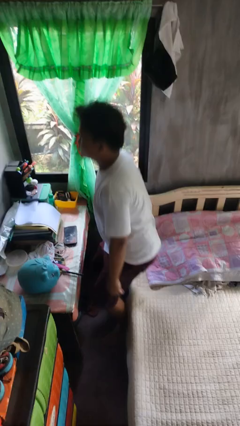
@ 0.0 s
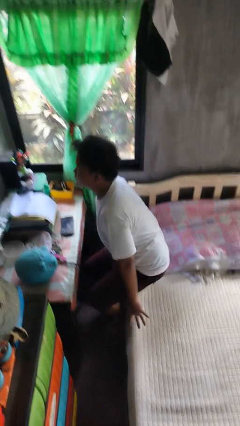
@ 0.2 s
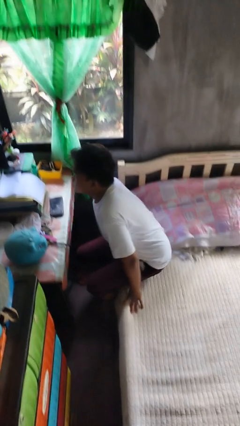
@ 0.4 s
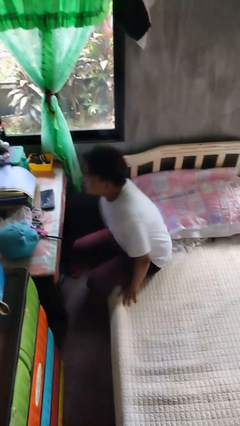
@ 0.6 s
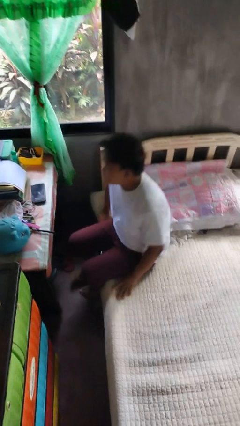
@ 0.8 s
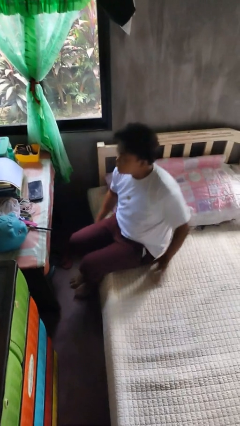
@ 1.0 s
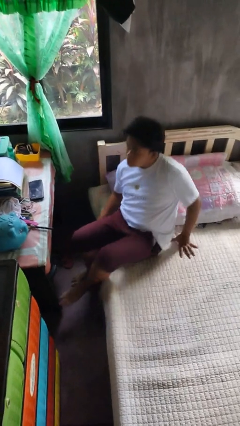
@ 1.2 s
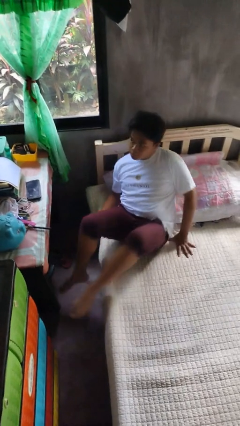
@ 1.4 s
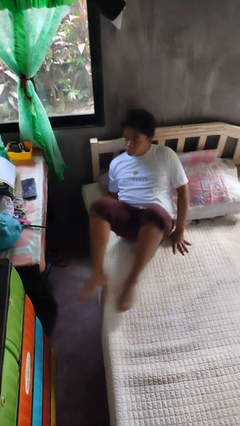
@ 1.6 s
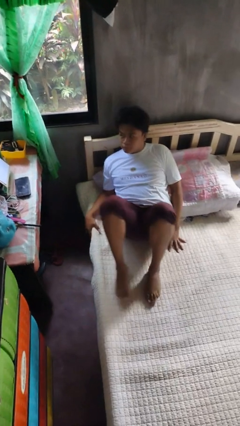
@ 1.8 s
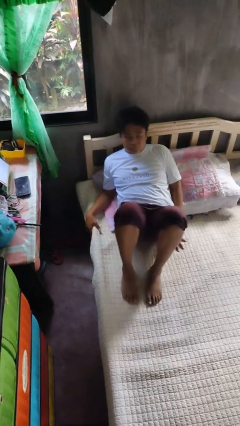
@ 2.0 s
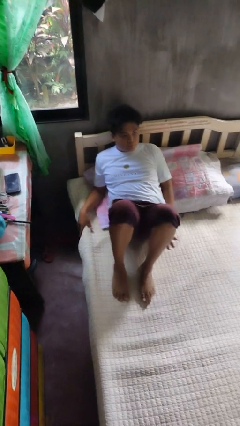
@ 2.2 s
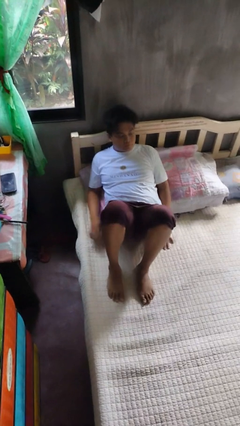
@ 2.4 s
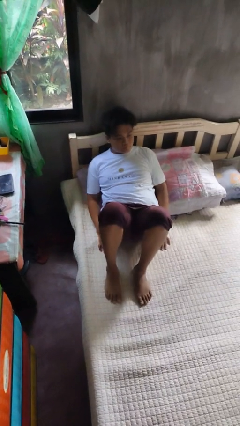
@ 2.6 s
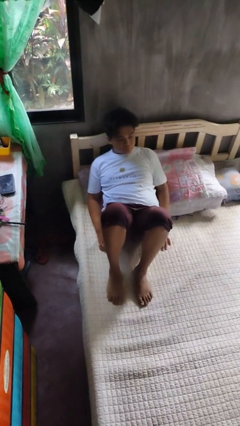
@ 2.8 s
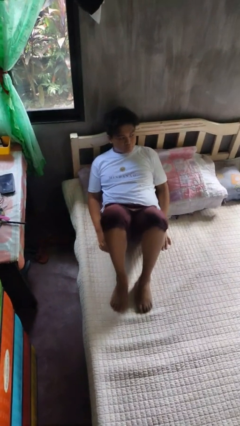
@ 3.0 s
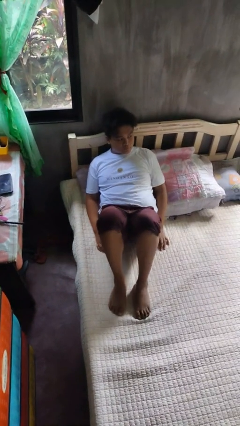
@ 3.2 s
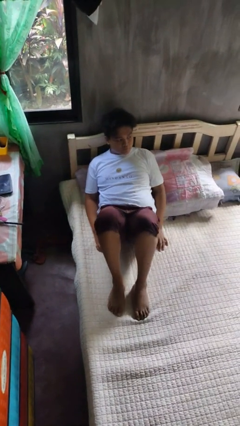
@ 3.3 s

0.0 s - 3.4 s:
person lies down on bed

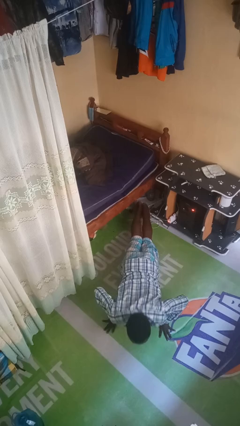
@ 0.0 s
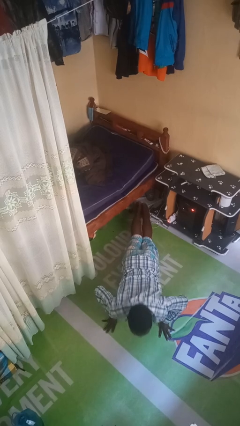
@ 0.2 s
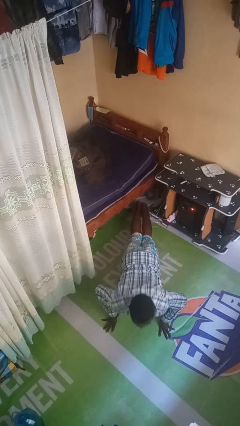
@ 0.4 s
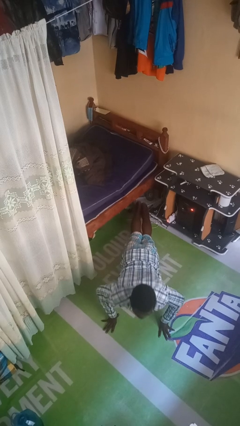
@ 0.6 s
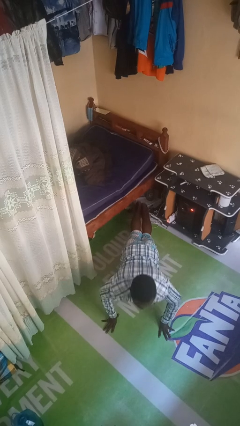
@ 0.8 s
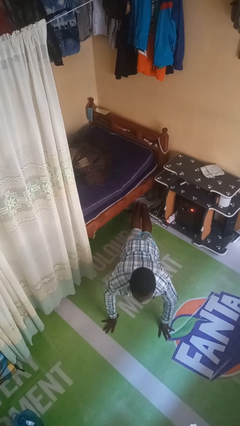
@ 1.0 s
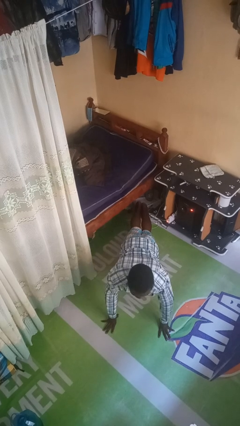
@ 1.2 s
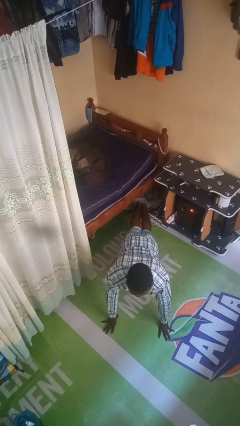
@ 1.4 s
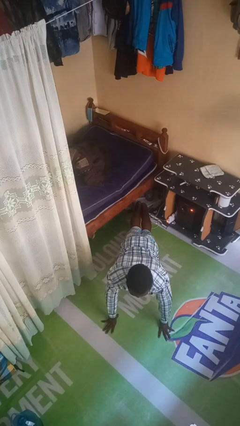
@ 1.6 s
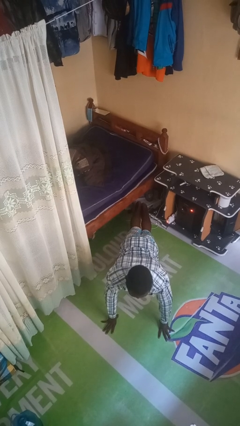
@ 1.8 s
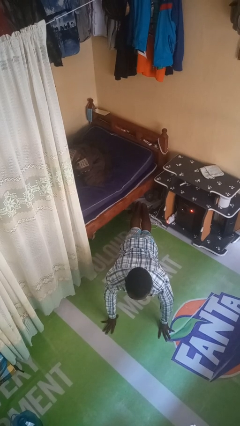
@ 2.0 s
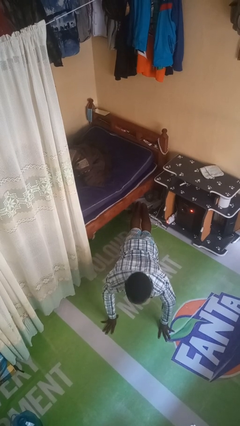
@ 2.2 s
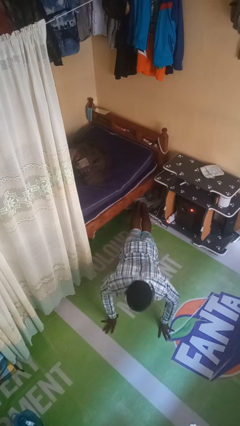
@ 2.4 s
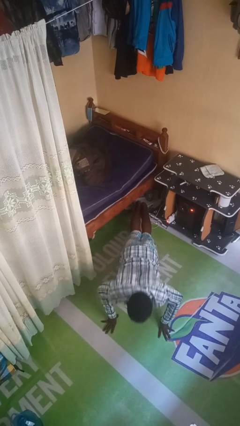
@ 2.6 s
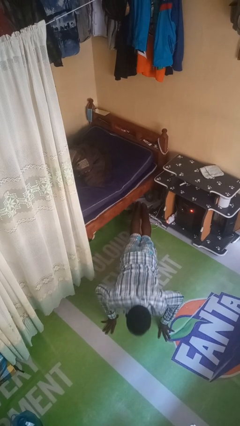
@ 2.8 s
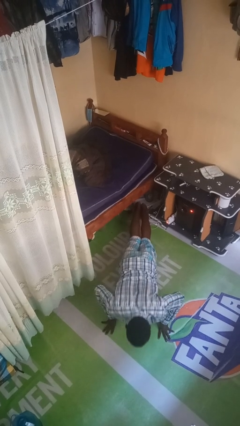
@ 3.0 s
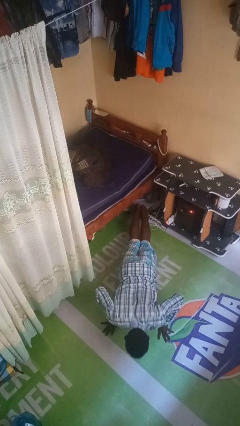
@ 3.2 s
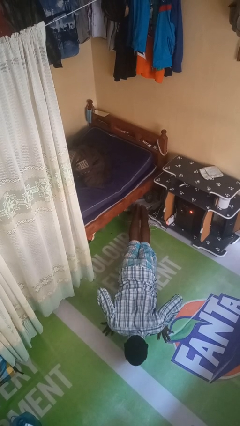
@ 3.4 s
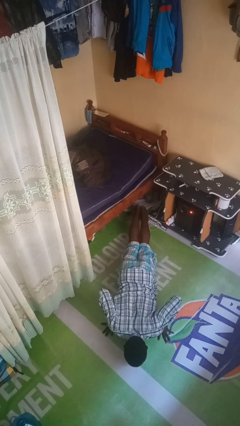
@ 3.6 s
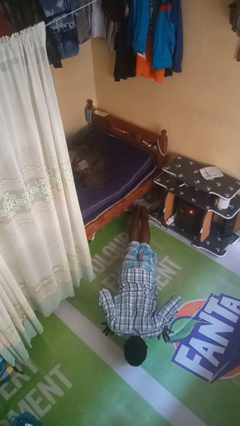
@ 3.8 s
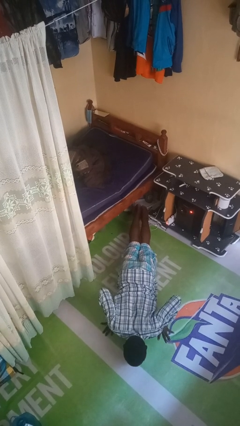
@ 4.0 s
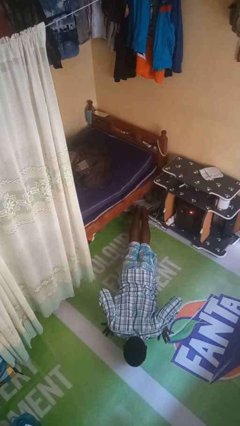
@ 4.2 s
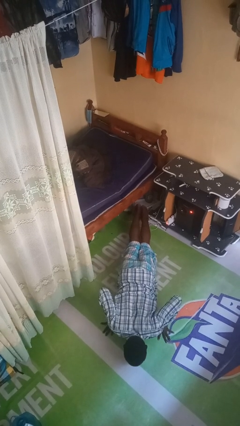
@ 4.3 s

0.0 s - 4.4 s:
person exercises with pushup

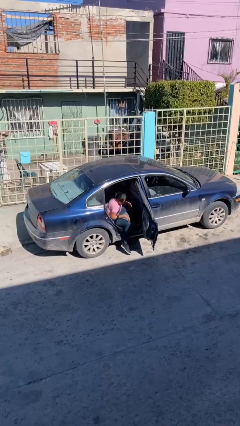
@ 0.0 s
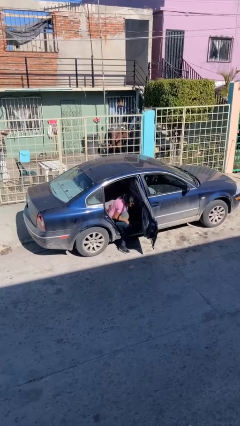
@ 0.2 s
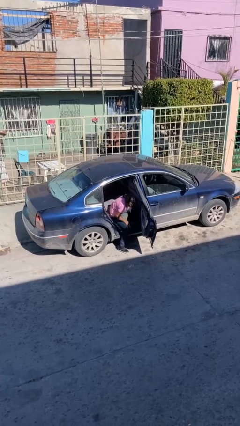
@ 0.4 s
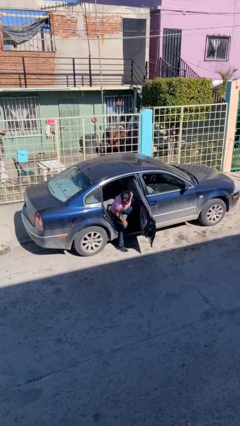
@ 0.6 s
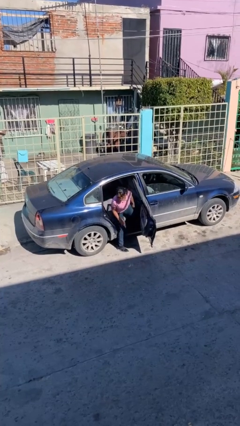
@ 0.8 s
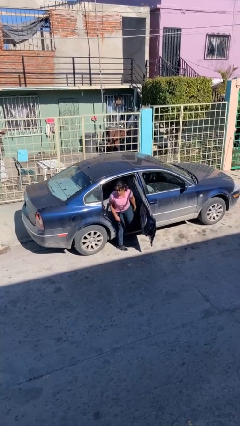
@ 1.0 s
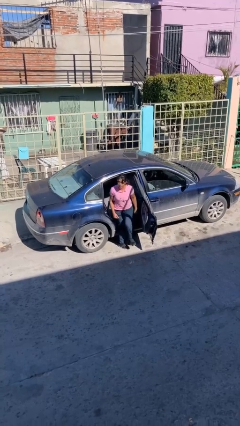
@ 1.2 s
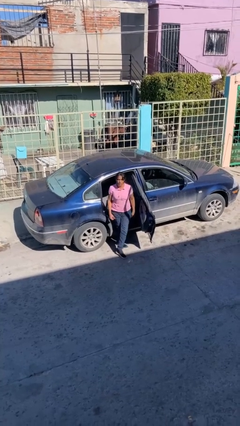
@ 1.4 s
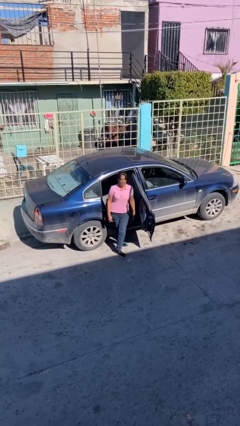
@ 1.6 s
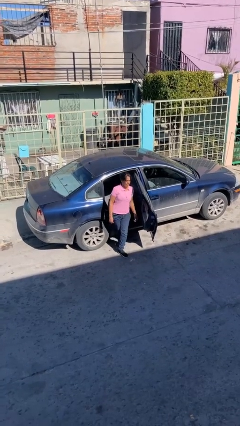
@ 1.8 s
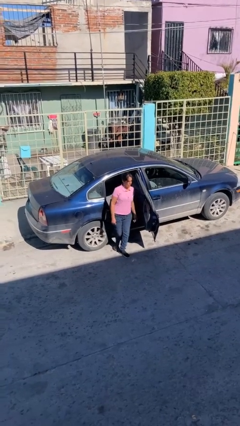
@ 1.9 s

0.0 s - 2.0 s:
person exits car

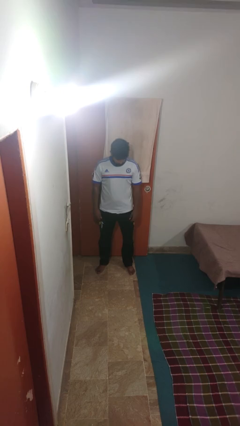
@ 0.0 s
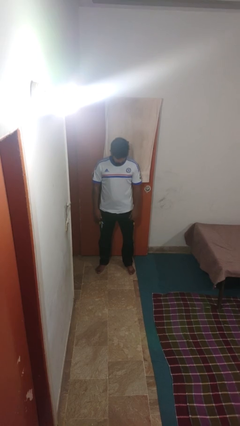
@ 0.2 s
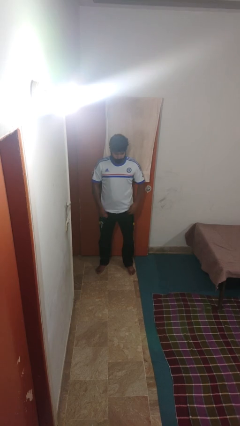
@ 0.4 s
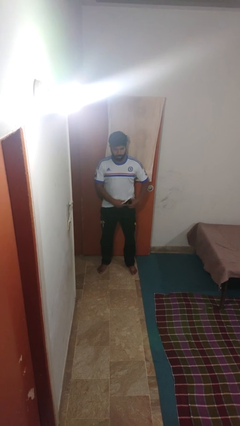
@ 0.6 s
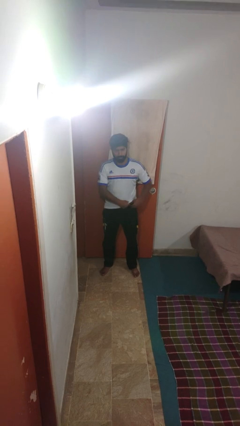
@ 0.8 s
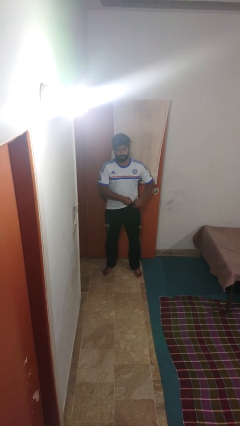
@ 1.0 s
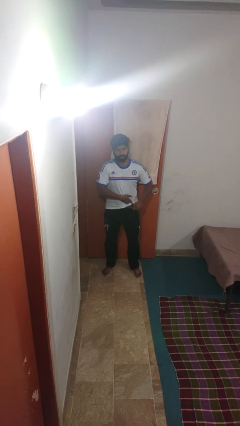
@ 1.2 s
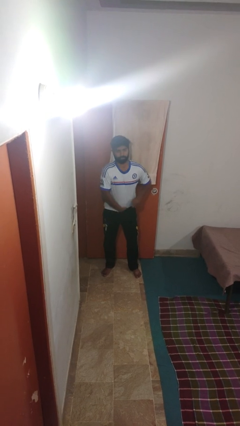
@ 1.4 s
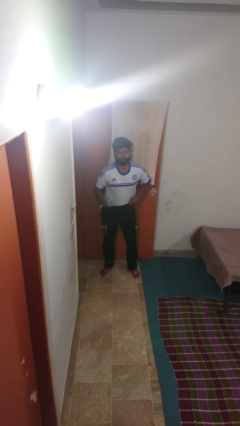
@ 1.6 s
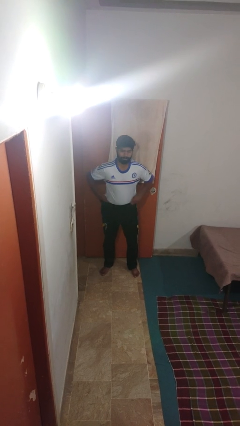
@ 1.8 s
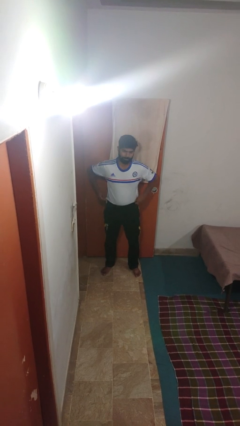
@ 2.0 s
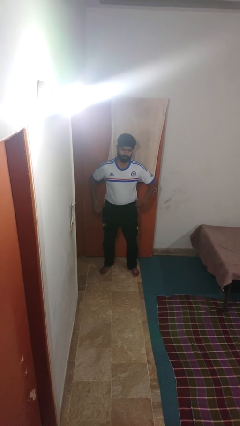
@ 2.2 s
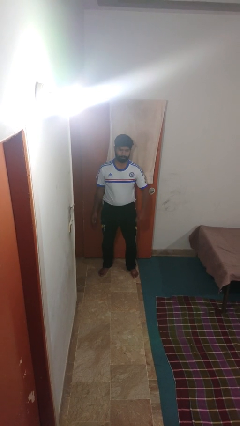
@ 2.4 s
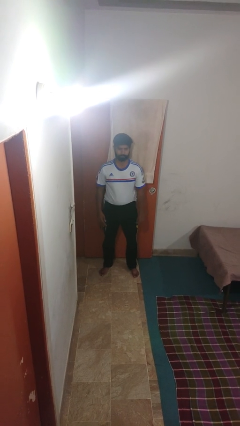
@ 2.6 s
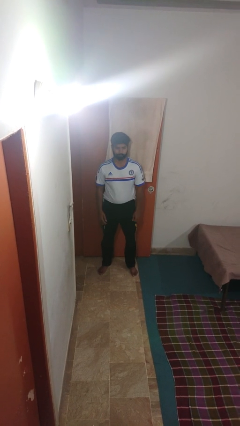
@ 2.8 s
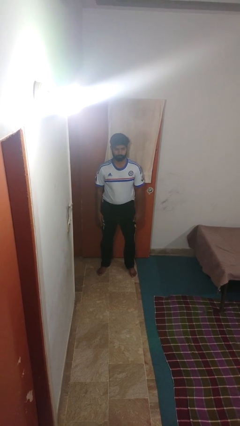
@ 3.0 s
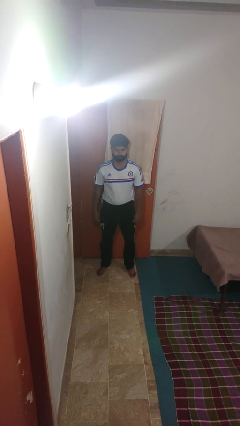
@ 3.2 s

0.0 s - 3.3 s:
person tucks in shirt

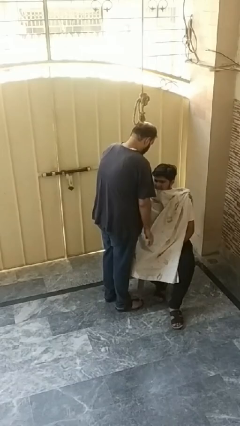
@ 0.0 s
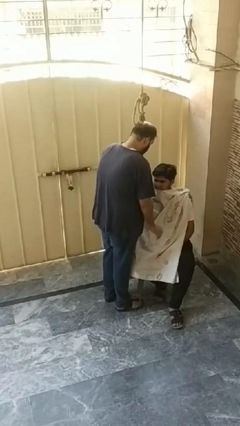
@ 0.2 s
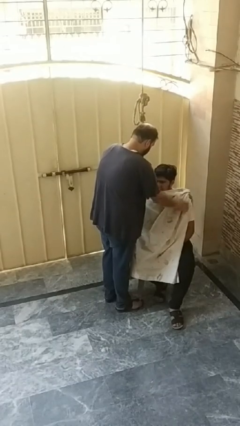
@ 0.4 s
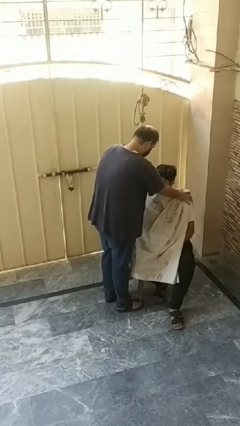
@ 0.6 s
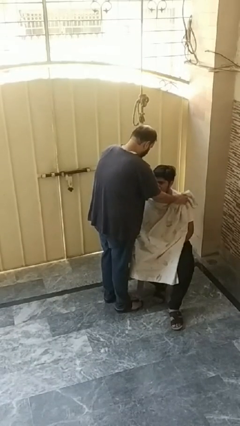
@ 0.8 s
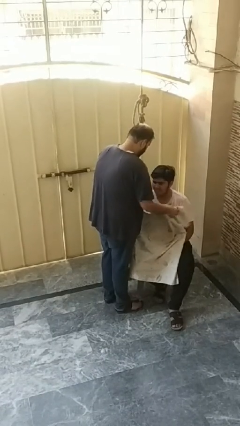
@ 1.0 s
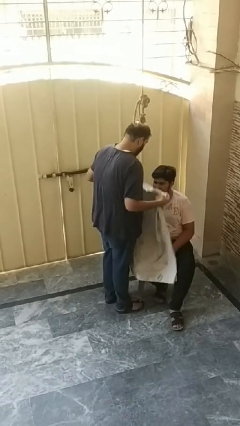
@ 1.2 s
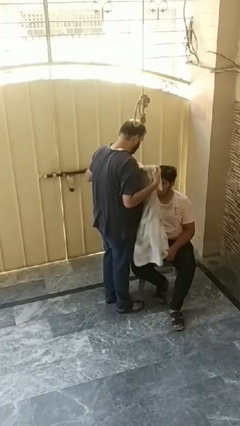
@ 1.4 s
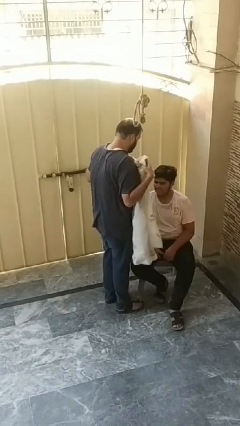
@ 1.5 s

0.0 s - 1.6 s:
person uncovers friend with blanket

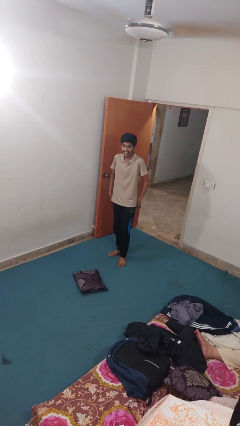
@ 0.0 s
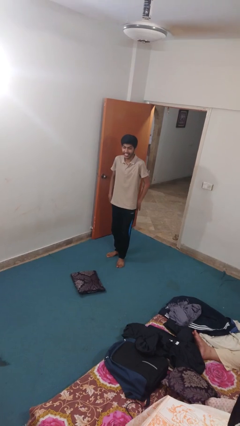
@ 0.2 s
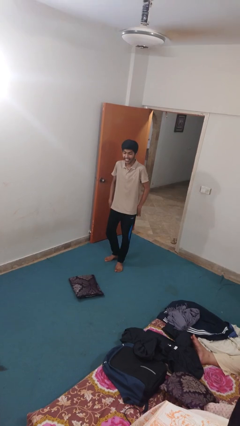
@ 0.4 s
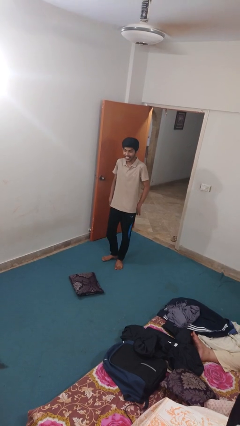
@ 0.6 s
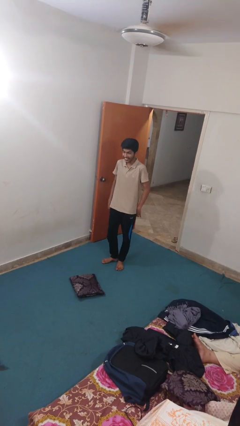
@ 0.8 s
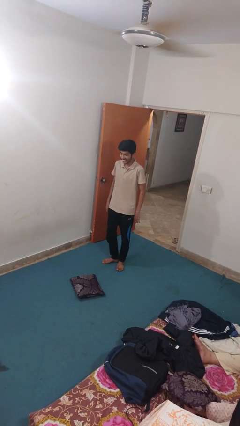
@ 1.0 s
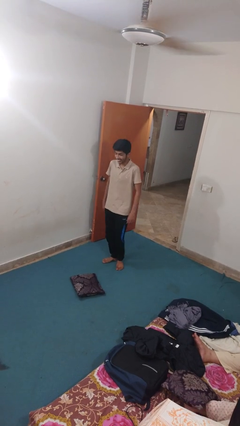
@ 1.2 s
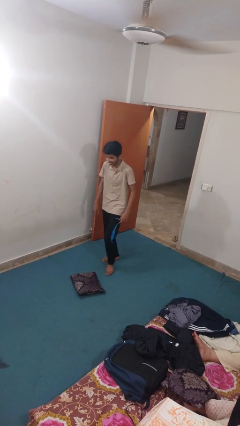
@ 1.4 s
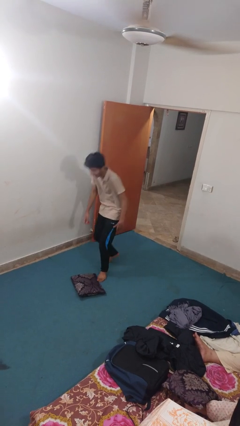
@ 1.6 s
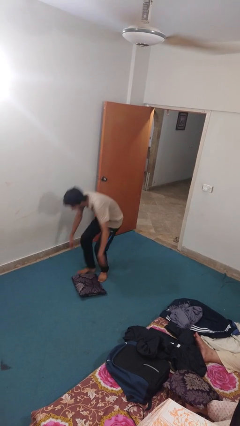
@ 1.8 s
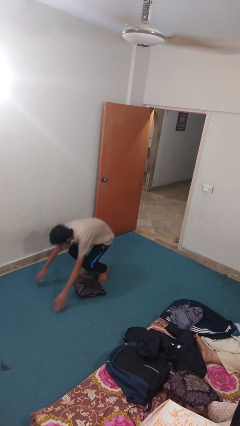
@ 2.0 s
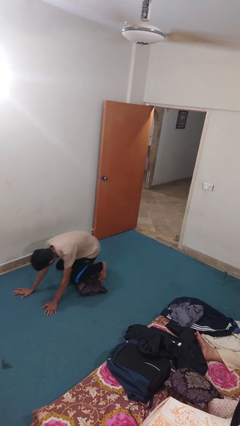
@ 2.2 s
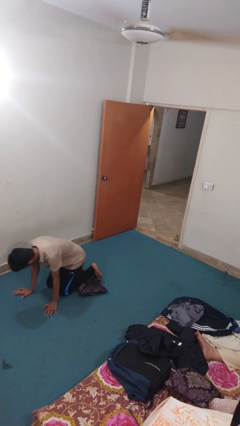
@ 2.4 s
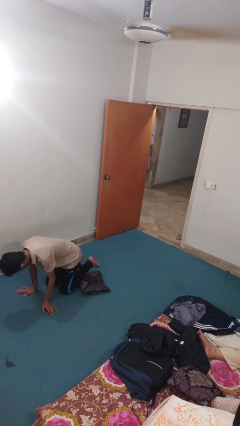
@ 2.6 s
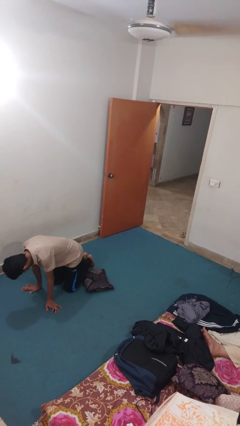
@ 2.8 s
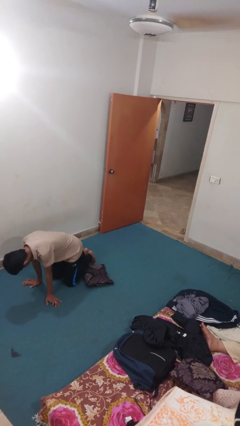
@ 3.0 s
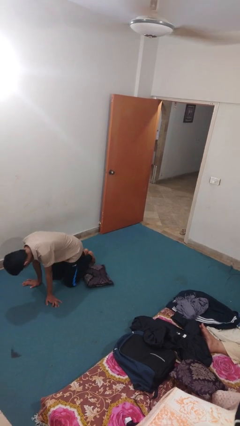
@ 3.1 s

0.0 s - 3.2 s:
person trips on object on floor
